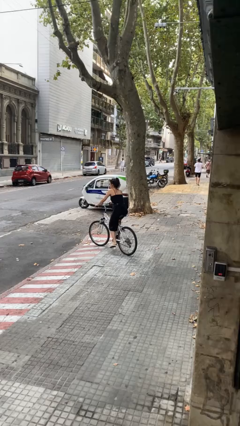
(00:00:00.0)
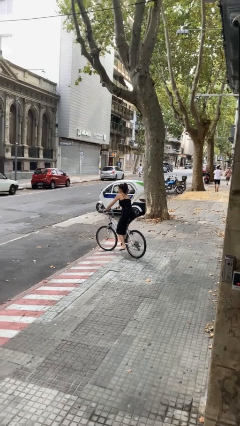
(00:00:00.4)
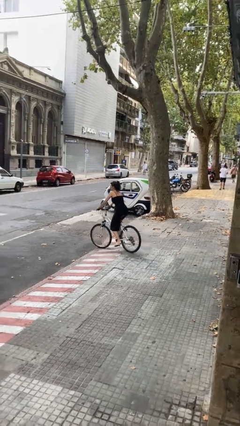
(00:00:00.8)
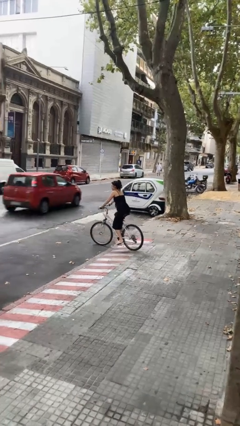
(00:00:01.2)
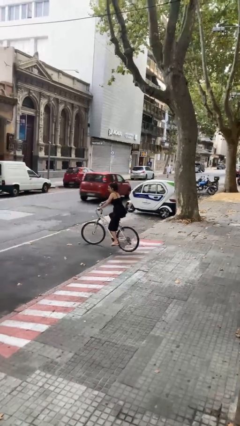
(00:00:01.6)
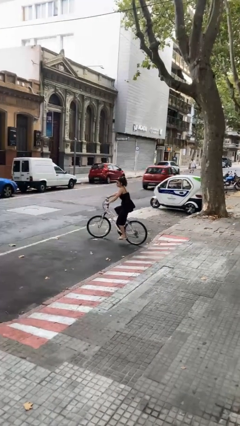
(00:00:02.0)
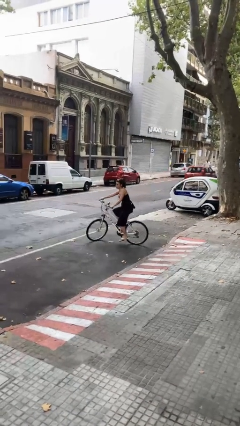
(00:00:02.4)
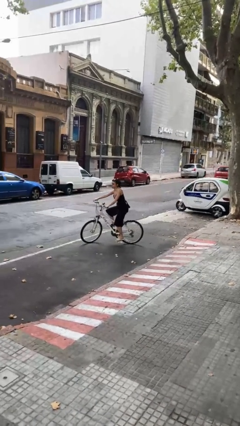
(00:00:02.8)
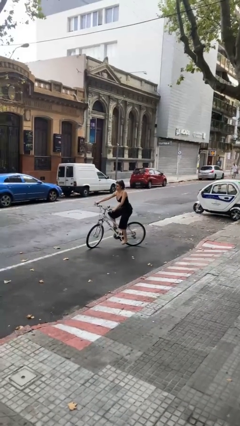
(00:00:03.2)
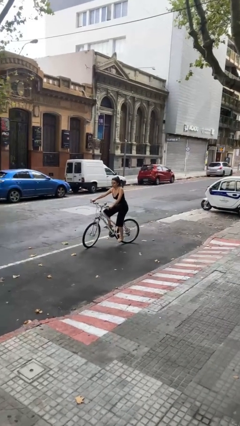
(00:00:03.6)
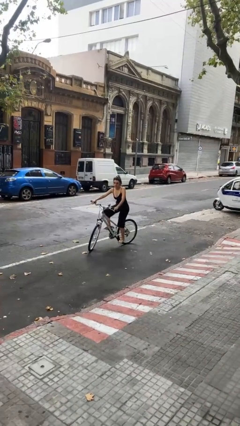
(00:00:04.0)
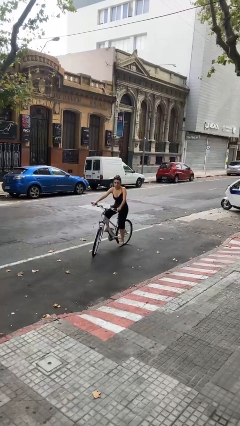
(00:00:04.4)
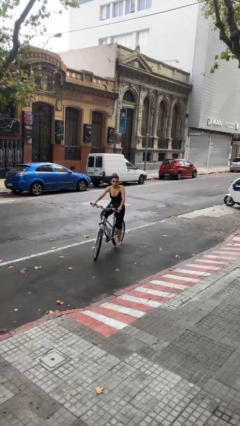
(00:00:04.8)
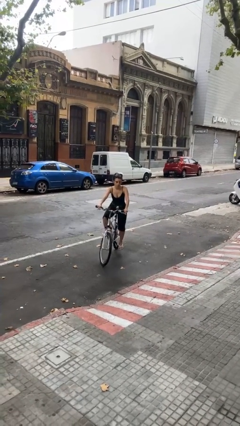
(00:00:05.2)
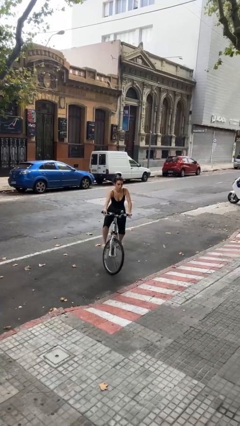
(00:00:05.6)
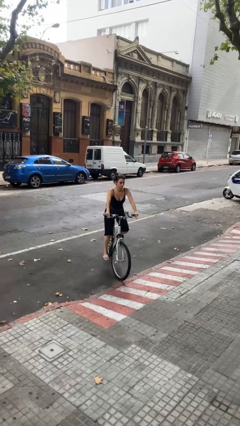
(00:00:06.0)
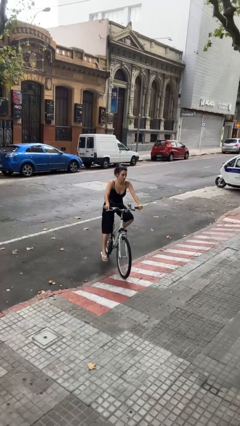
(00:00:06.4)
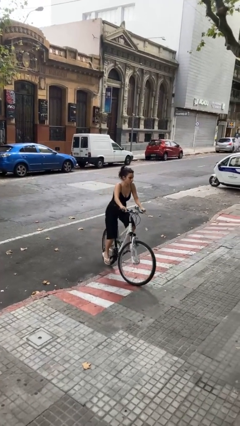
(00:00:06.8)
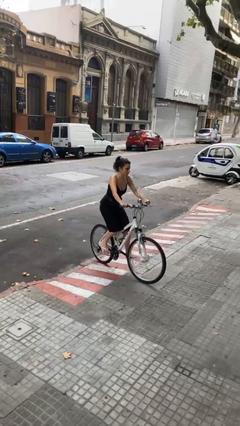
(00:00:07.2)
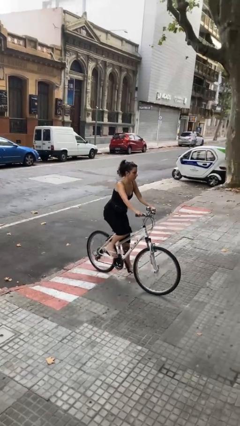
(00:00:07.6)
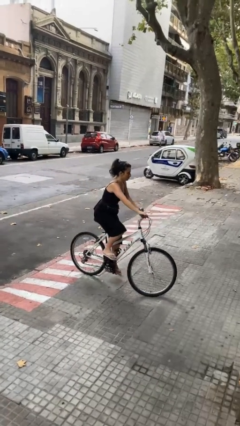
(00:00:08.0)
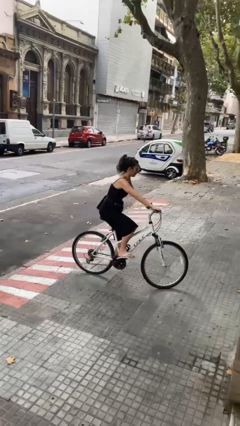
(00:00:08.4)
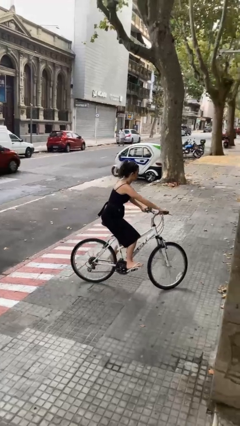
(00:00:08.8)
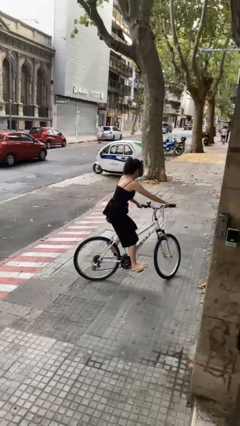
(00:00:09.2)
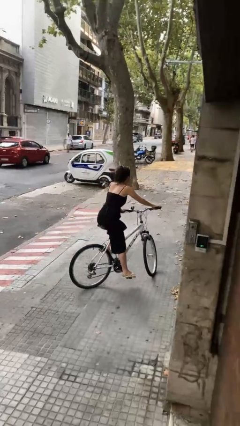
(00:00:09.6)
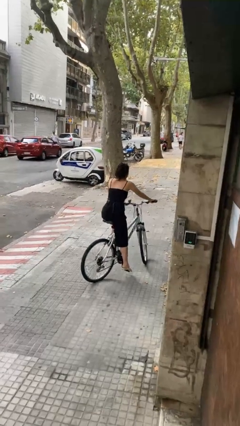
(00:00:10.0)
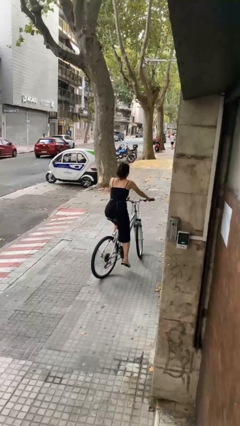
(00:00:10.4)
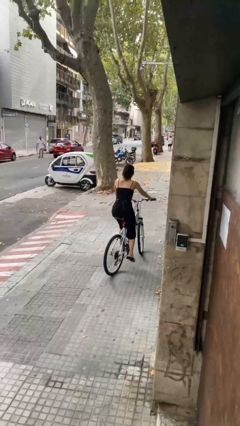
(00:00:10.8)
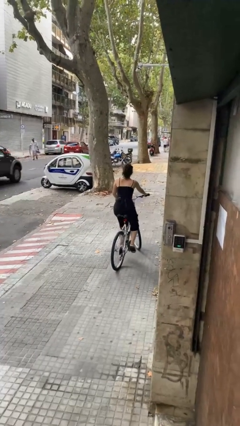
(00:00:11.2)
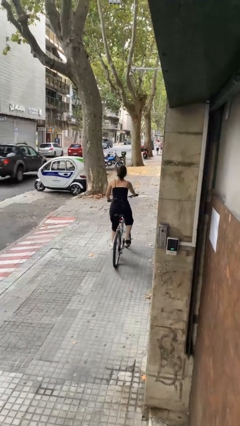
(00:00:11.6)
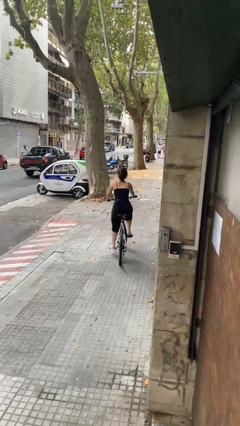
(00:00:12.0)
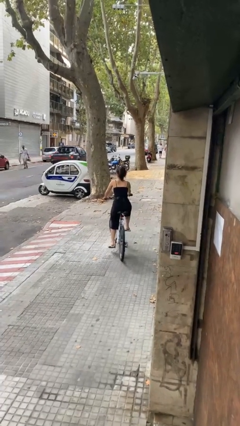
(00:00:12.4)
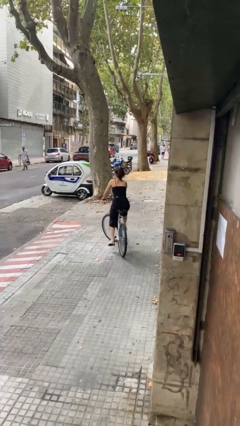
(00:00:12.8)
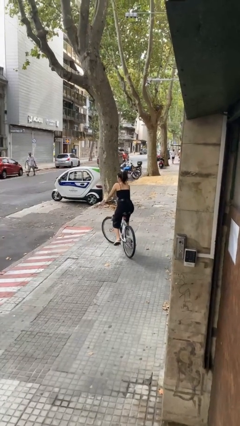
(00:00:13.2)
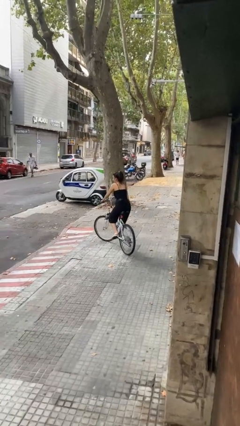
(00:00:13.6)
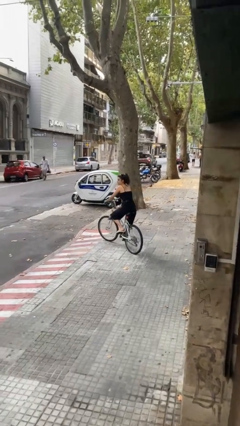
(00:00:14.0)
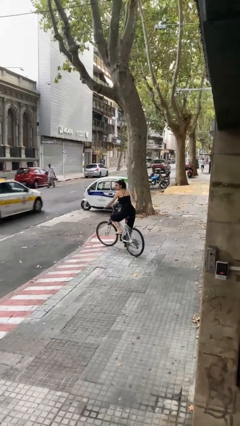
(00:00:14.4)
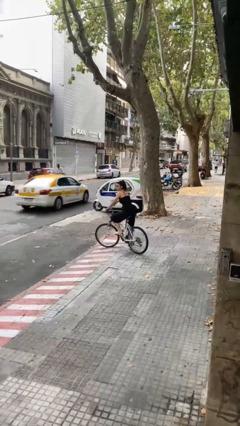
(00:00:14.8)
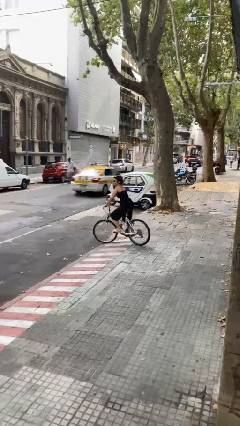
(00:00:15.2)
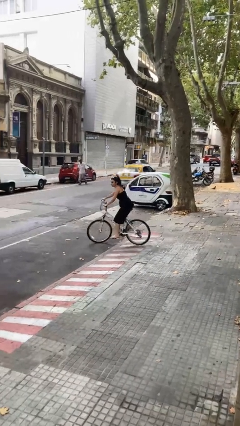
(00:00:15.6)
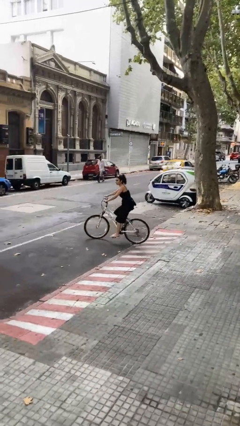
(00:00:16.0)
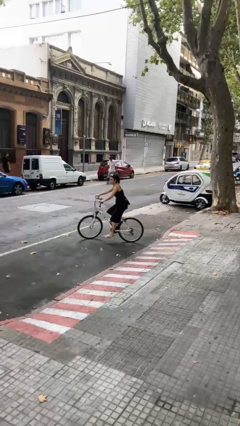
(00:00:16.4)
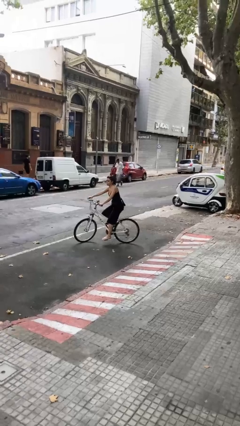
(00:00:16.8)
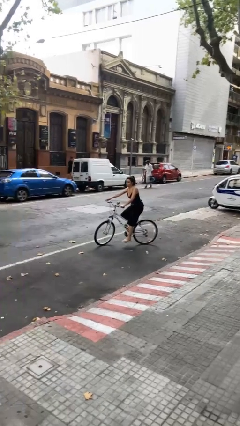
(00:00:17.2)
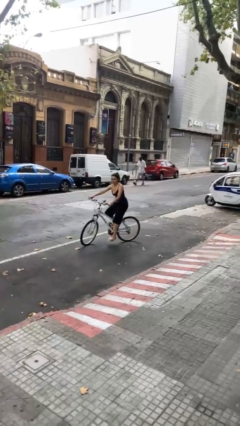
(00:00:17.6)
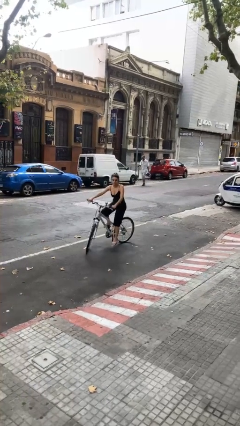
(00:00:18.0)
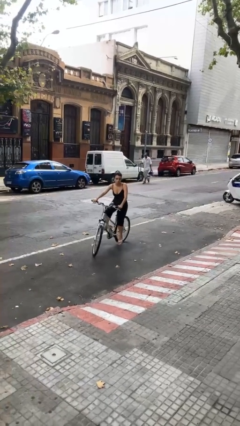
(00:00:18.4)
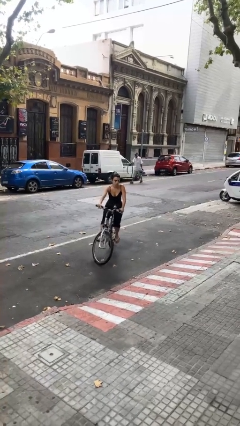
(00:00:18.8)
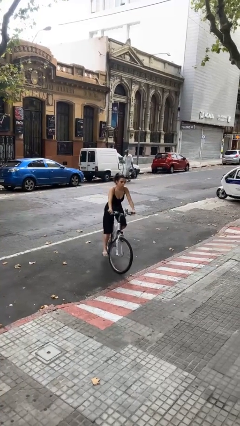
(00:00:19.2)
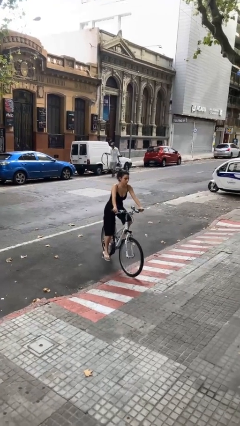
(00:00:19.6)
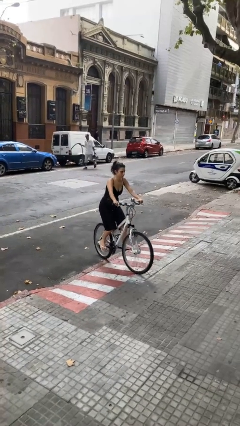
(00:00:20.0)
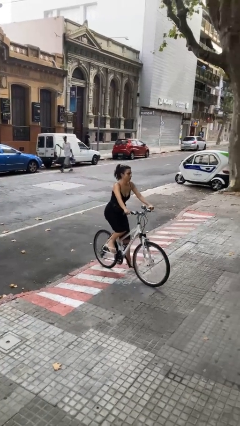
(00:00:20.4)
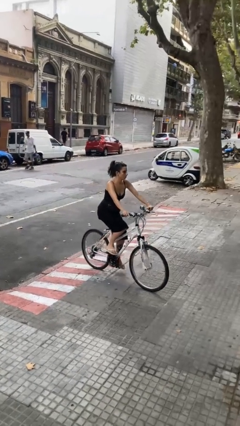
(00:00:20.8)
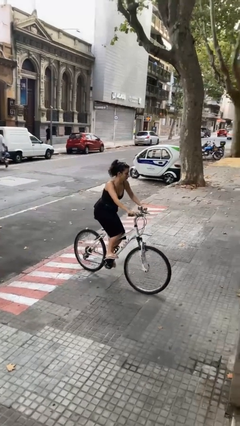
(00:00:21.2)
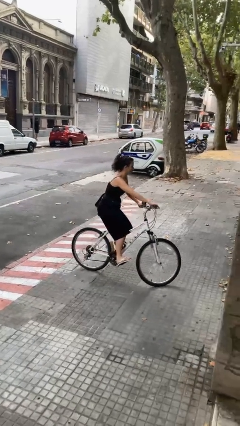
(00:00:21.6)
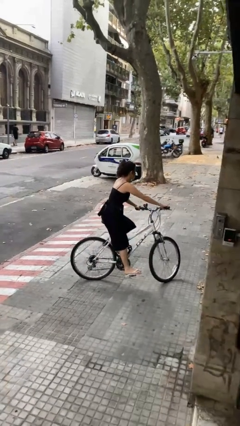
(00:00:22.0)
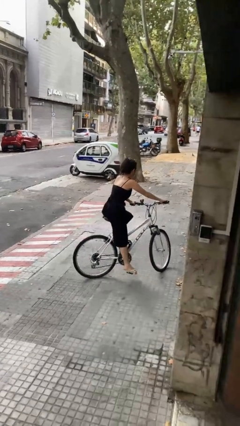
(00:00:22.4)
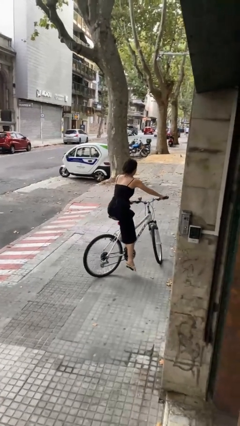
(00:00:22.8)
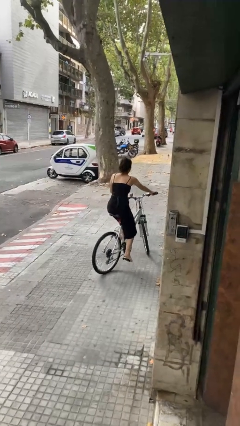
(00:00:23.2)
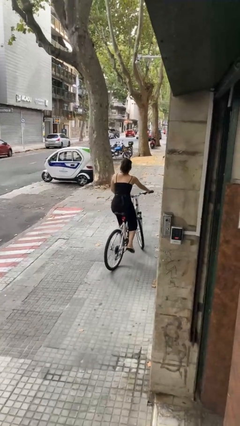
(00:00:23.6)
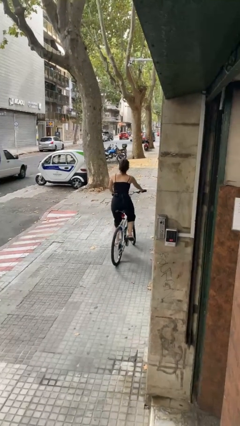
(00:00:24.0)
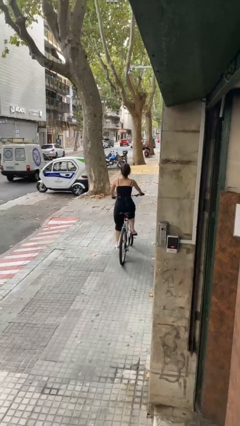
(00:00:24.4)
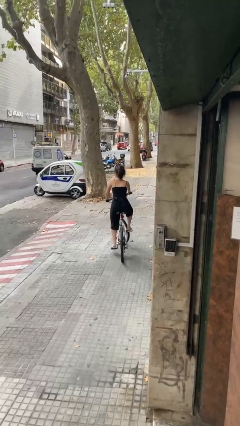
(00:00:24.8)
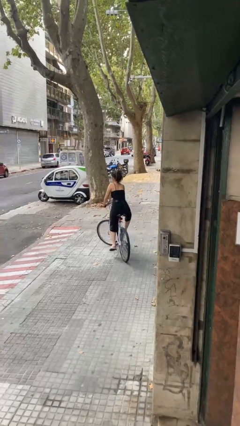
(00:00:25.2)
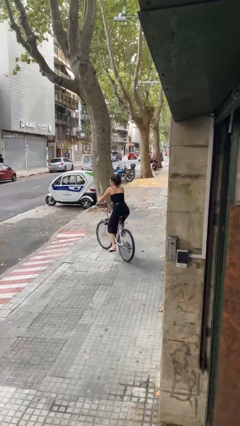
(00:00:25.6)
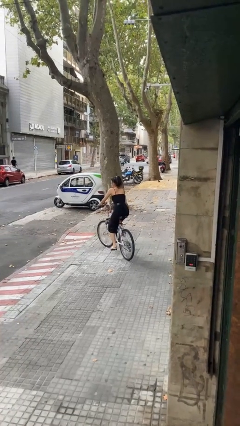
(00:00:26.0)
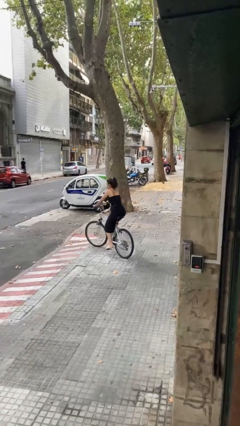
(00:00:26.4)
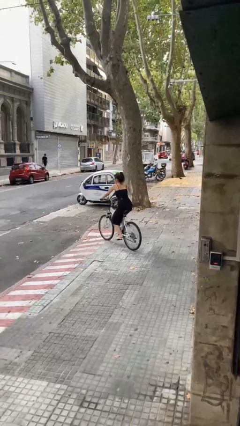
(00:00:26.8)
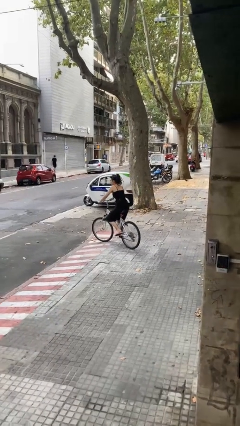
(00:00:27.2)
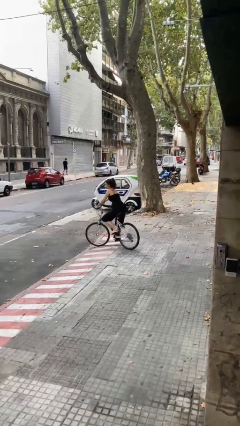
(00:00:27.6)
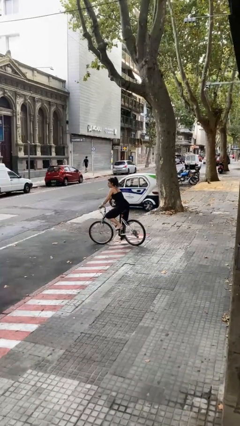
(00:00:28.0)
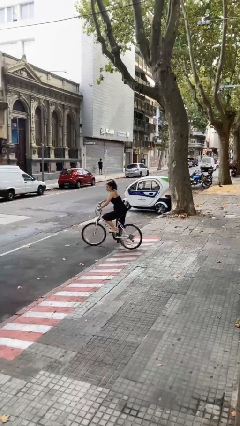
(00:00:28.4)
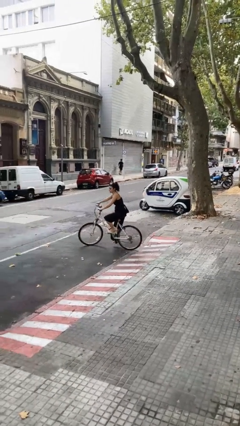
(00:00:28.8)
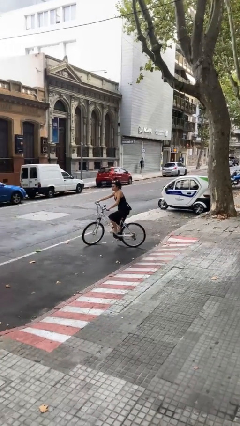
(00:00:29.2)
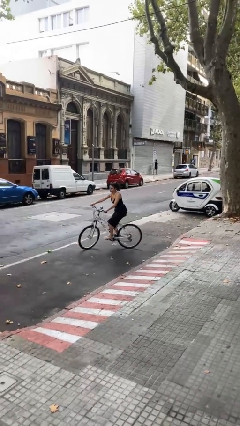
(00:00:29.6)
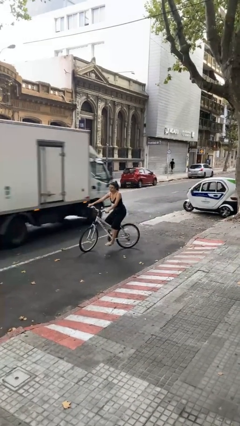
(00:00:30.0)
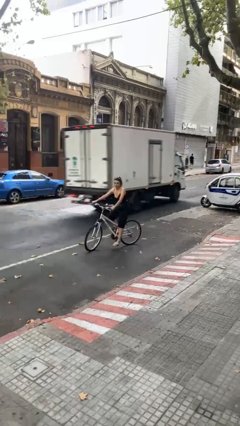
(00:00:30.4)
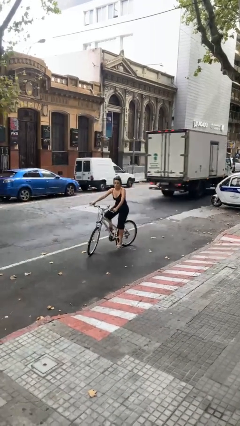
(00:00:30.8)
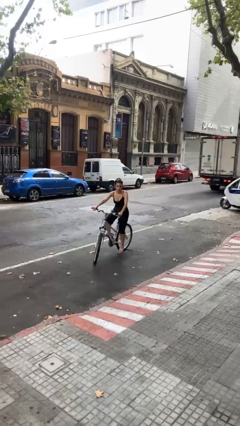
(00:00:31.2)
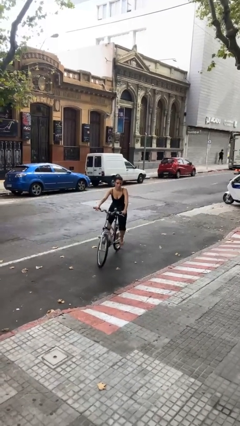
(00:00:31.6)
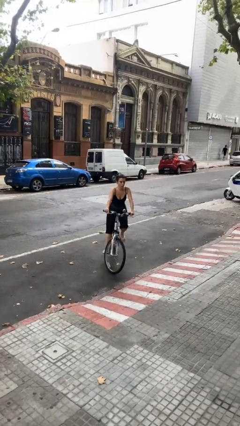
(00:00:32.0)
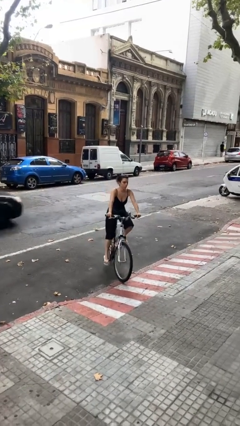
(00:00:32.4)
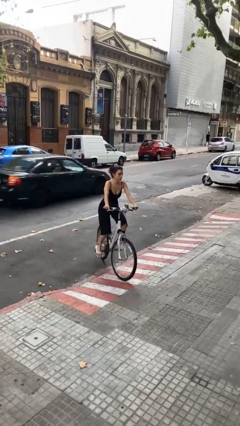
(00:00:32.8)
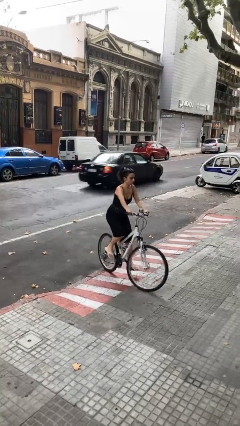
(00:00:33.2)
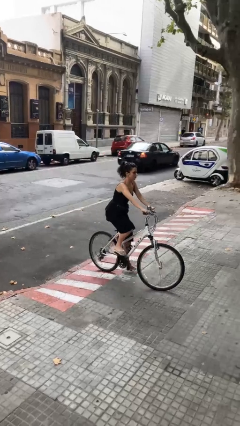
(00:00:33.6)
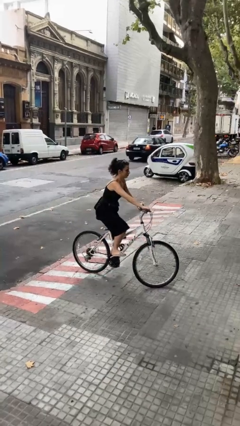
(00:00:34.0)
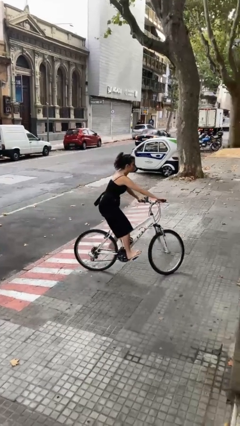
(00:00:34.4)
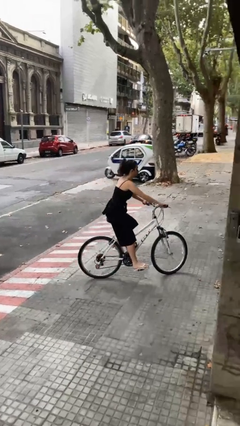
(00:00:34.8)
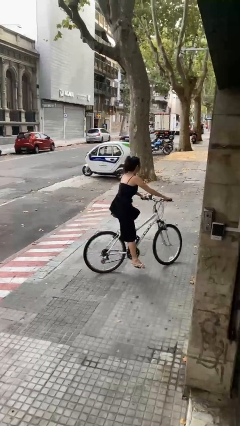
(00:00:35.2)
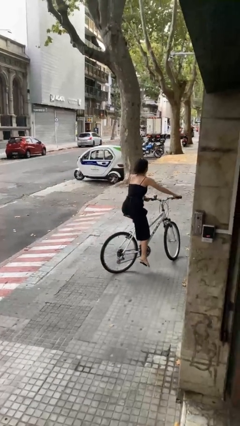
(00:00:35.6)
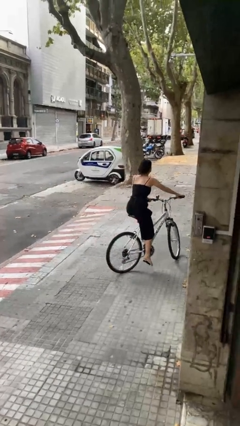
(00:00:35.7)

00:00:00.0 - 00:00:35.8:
person rides bicycle

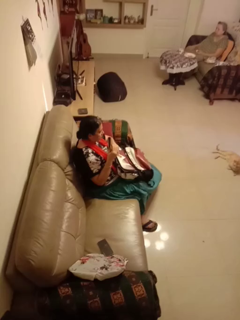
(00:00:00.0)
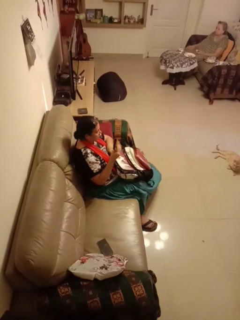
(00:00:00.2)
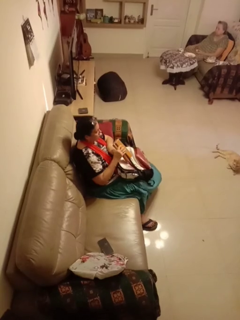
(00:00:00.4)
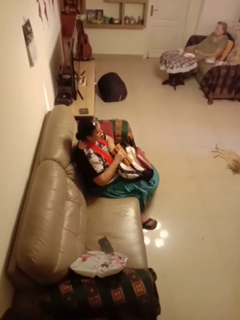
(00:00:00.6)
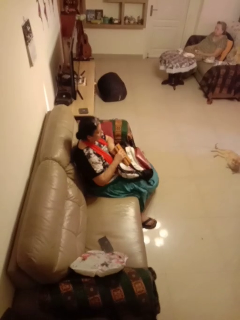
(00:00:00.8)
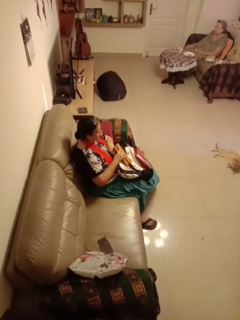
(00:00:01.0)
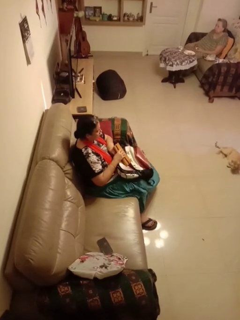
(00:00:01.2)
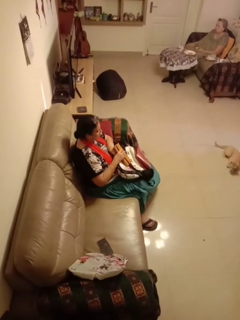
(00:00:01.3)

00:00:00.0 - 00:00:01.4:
person takes object from backpack
